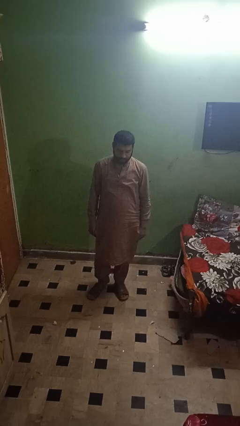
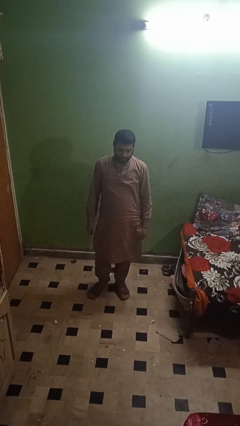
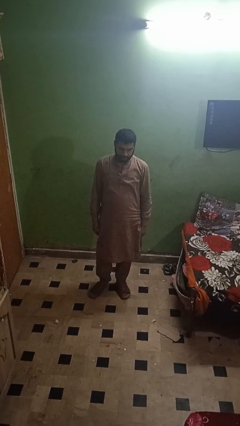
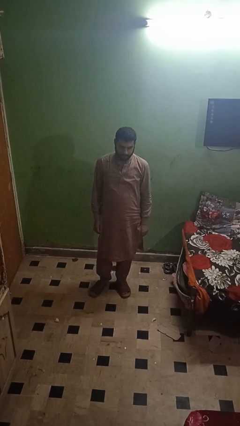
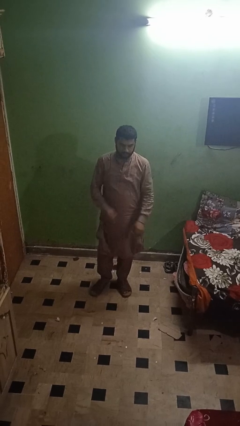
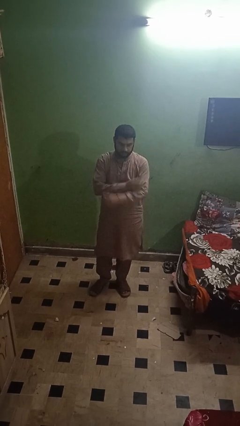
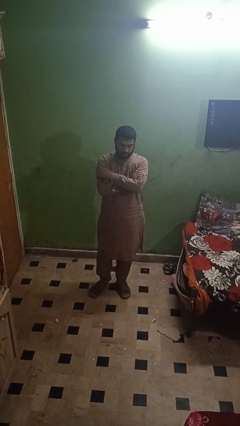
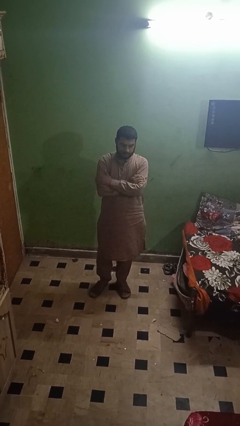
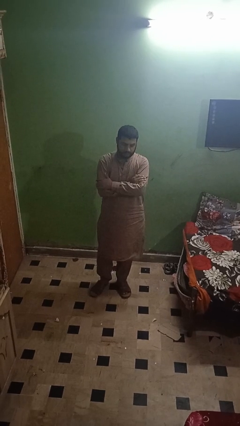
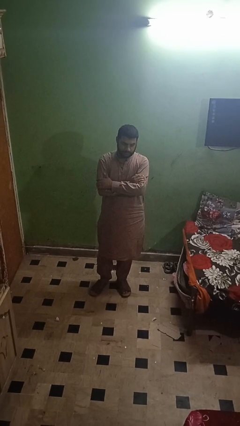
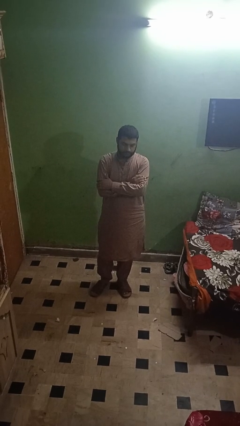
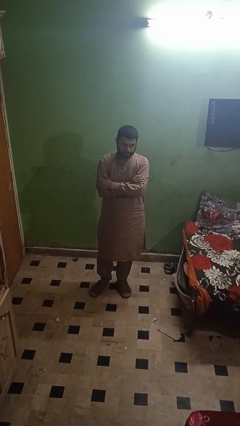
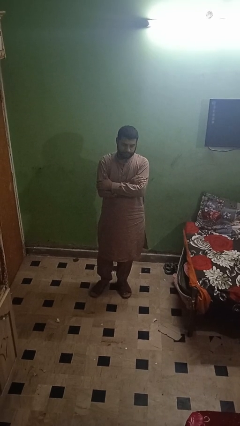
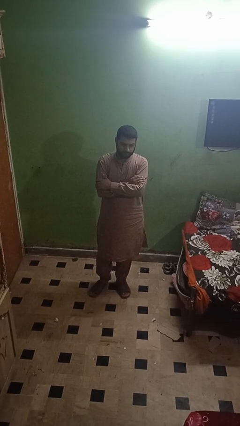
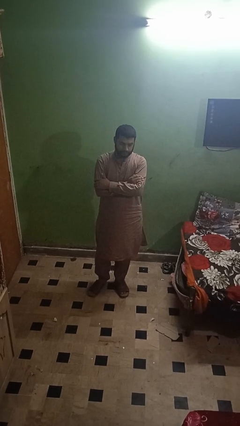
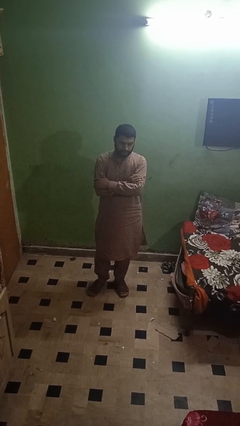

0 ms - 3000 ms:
person crosses arms

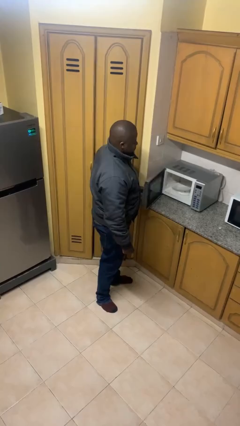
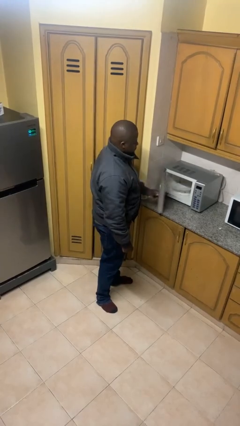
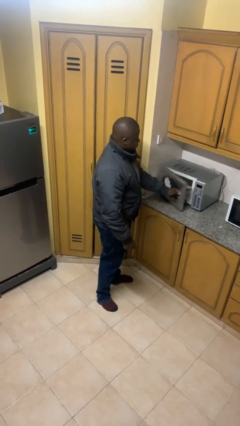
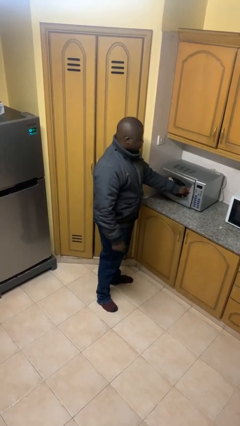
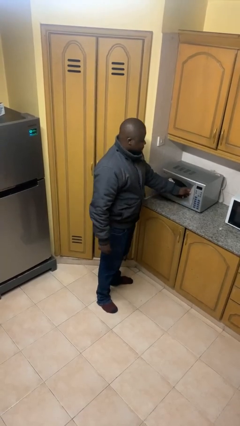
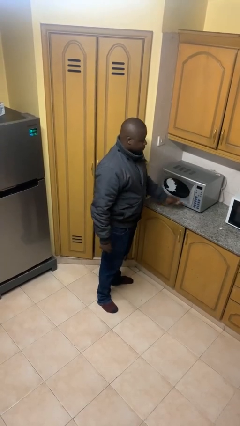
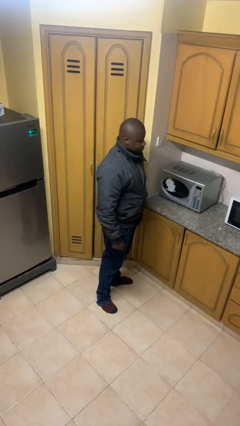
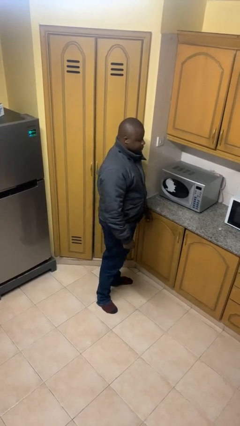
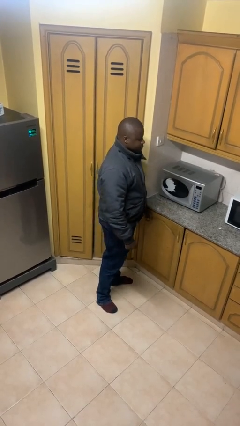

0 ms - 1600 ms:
person closes microwave

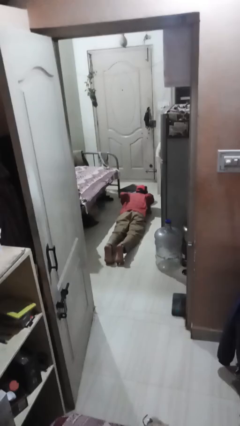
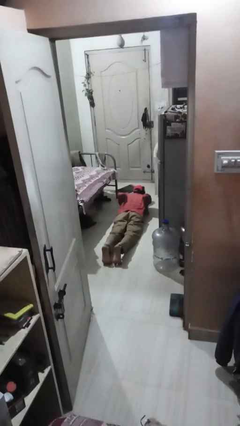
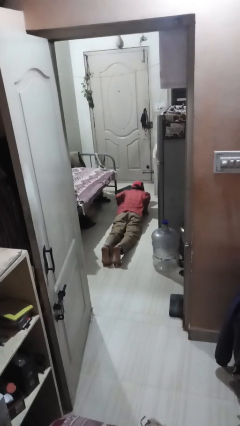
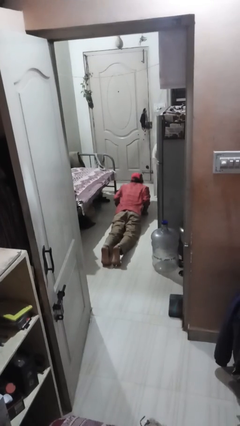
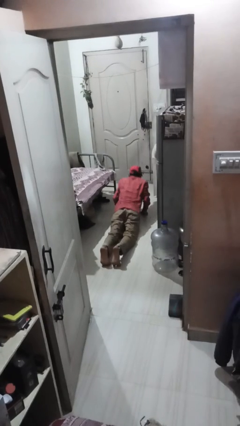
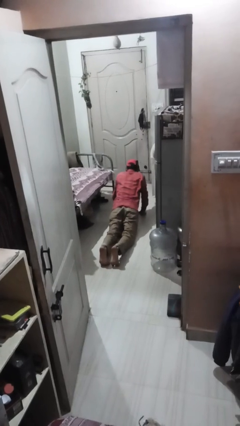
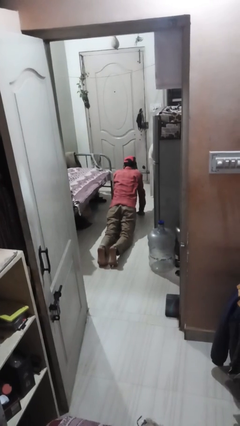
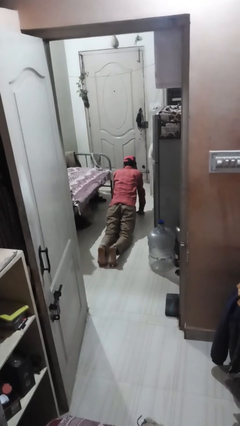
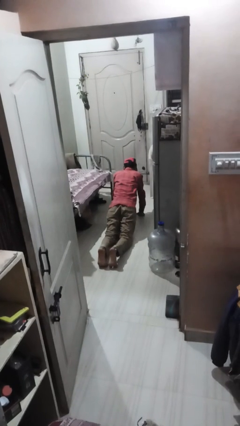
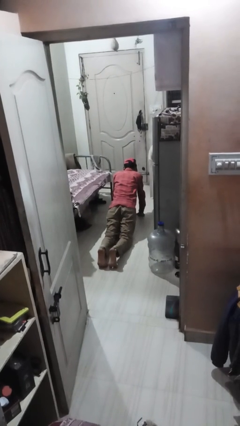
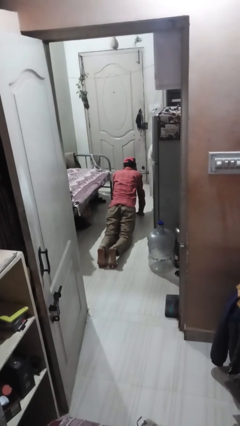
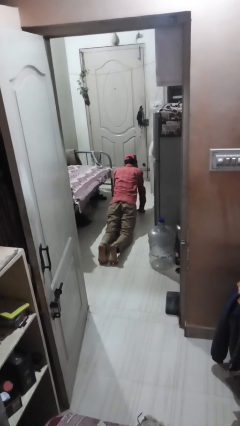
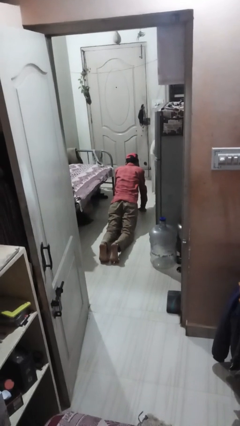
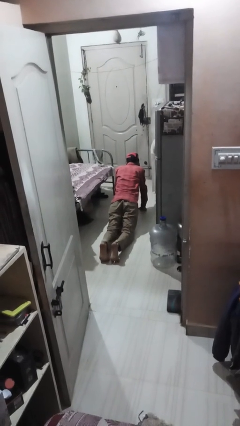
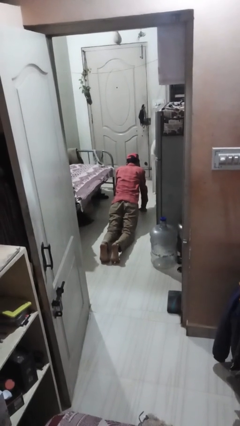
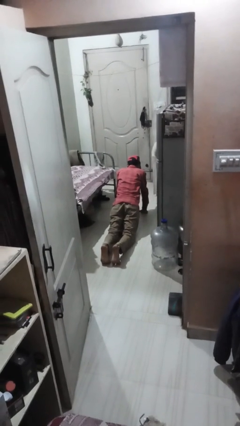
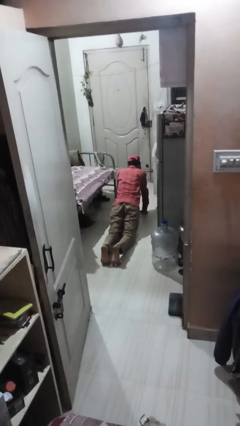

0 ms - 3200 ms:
person exercises with pushup

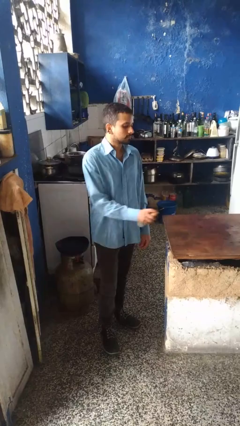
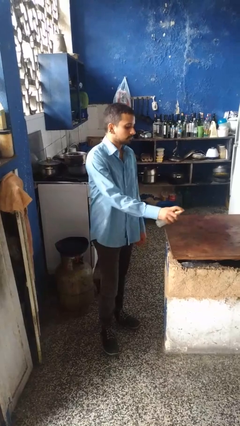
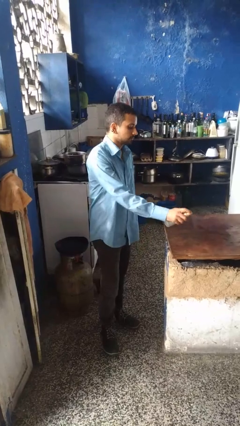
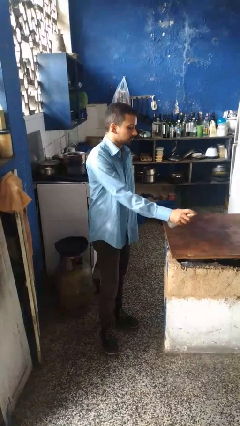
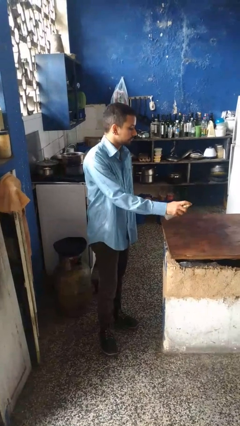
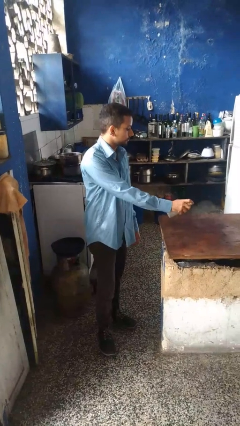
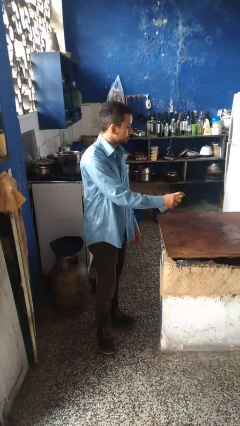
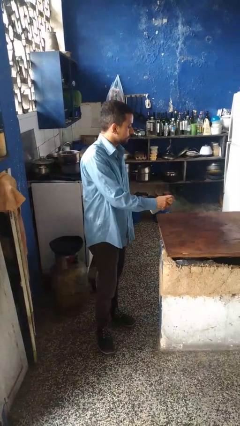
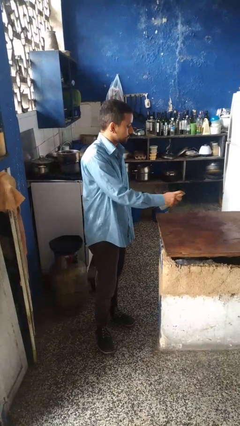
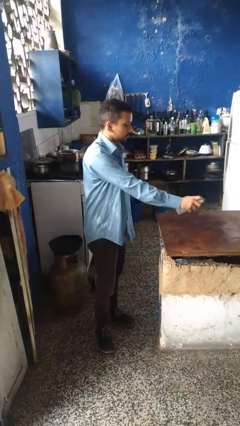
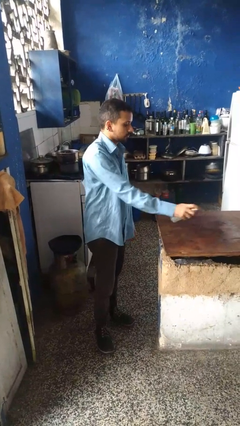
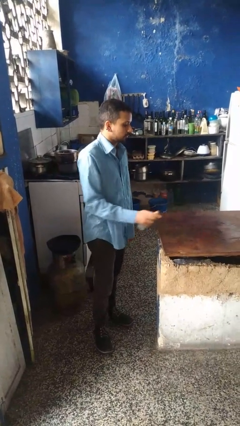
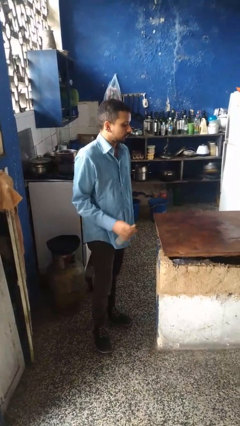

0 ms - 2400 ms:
person sprays from bottle

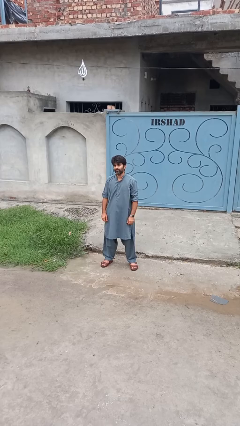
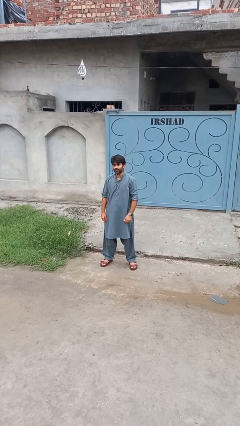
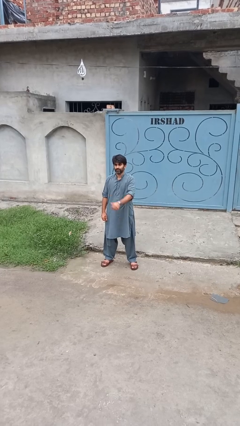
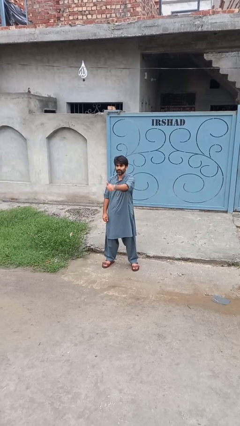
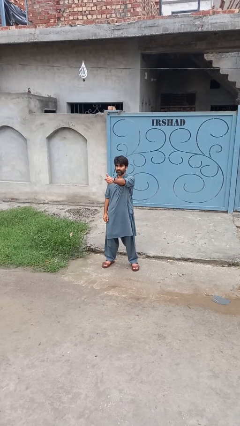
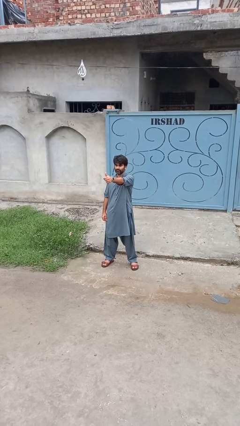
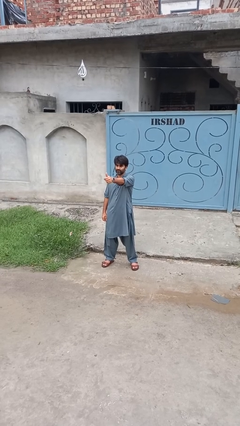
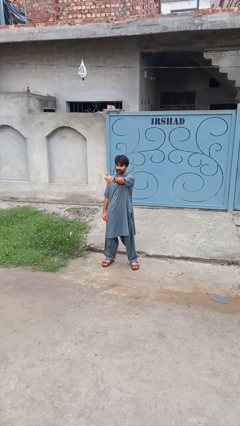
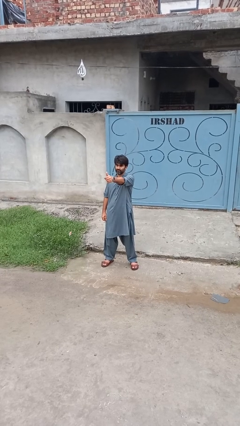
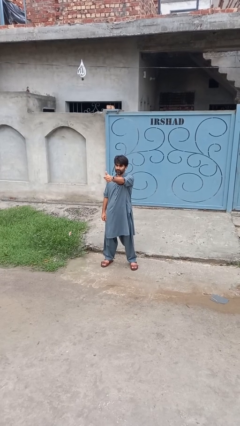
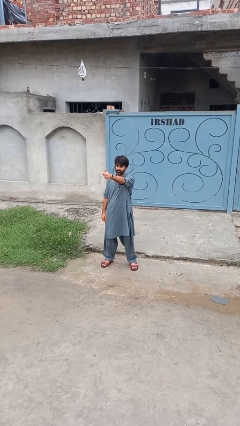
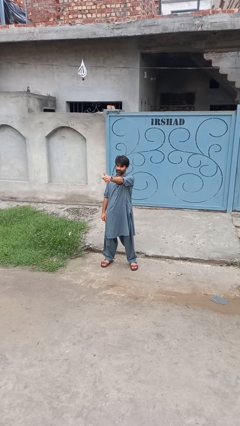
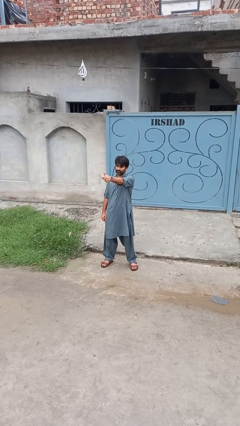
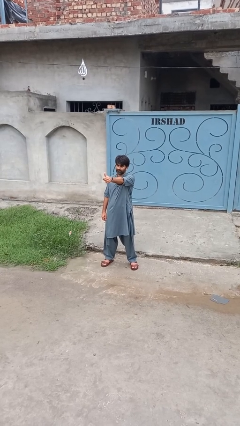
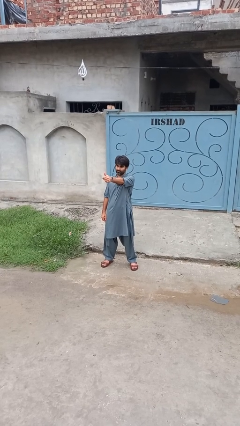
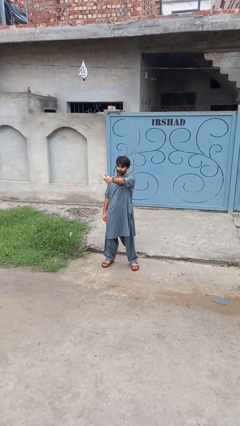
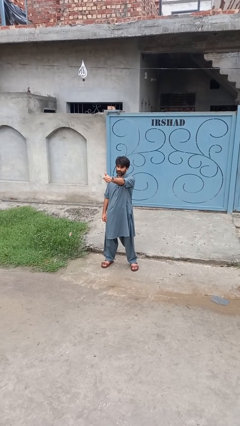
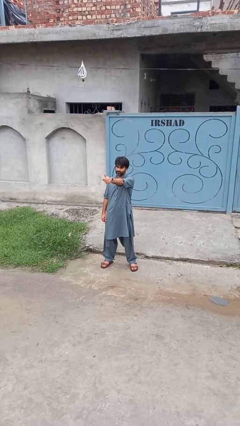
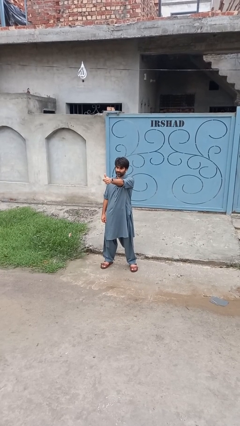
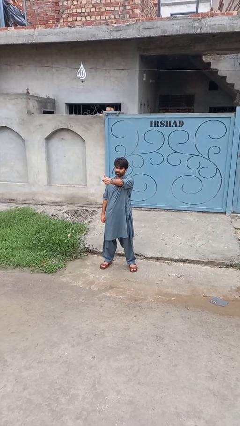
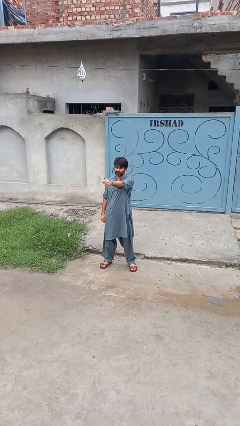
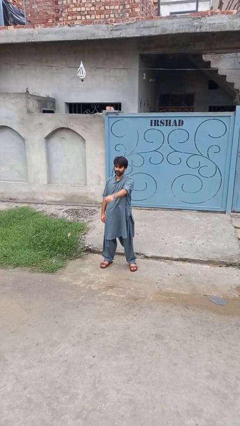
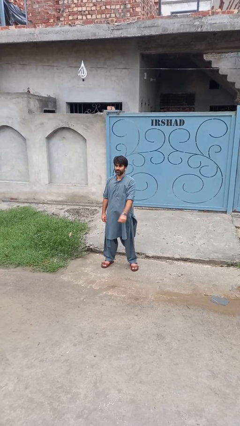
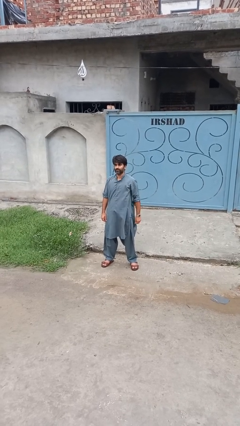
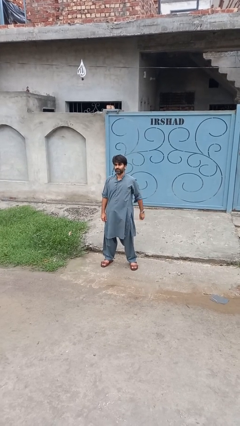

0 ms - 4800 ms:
person gestures thumbs up

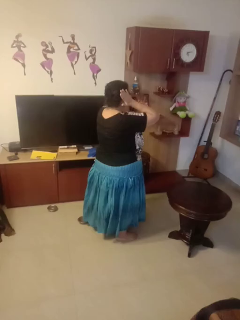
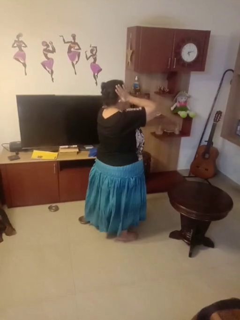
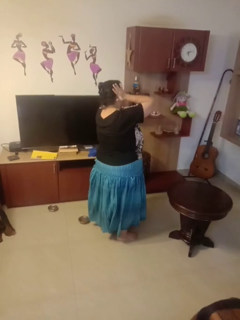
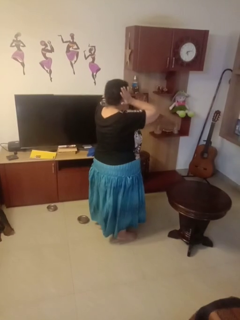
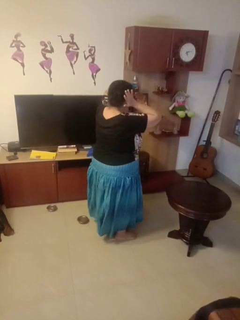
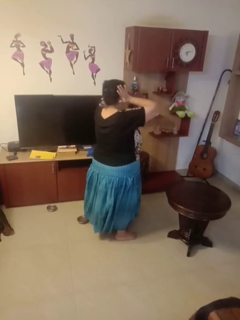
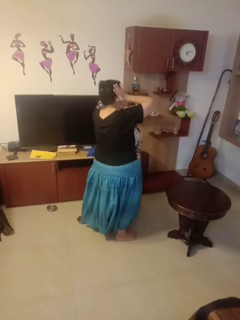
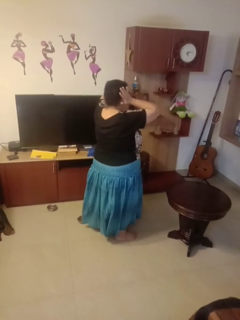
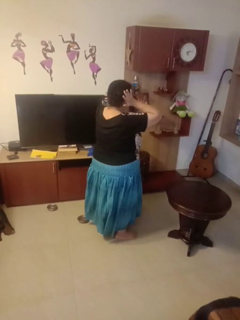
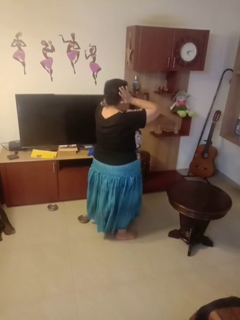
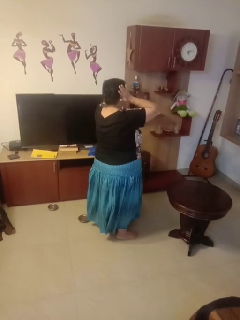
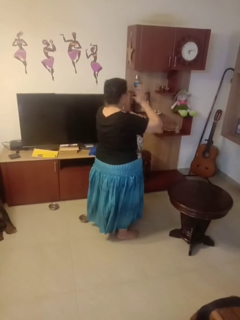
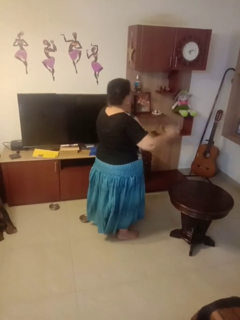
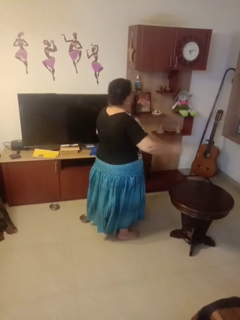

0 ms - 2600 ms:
person puts fingers in ear

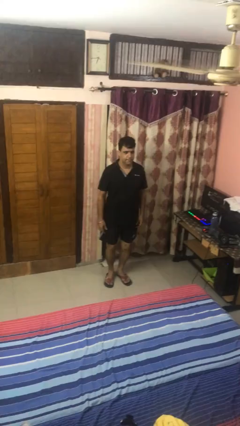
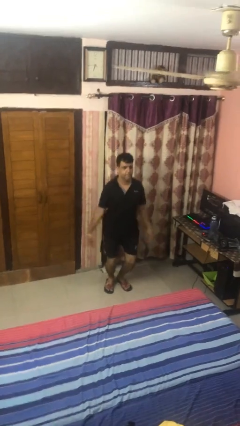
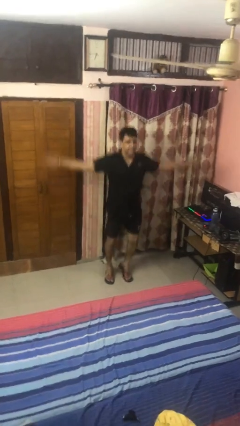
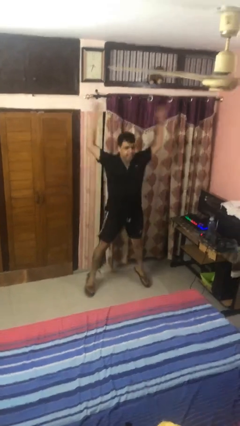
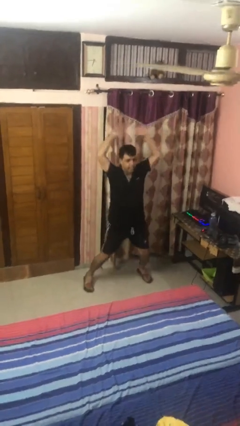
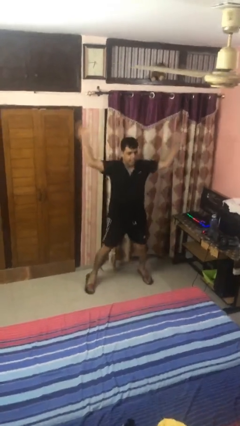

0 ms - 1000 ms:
person exercises with jumping jacks
